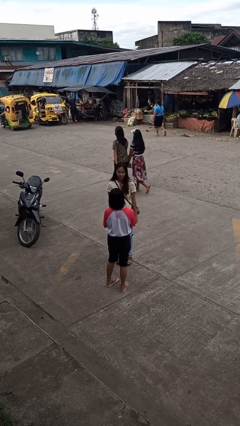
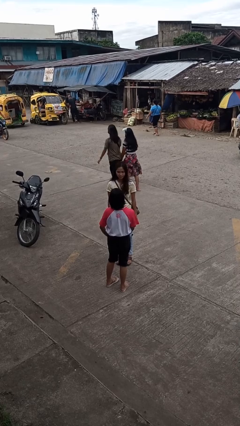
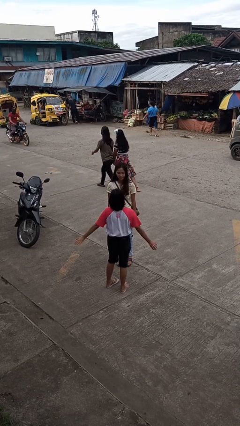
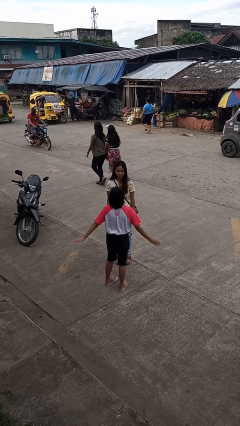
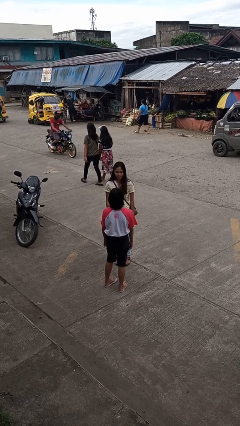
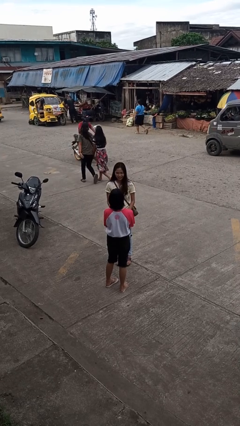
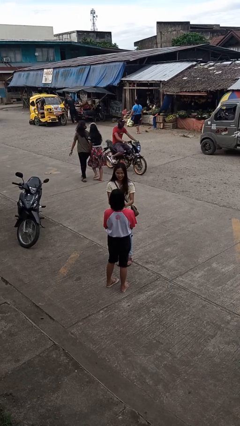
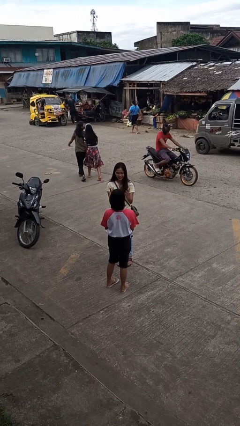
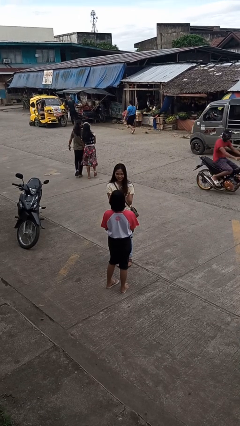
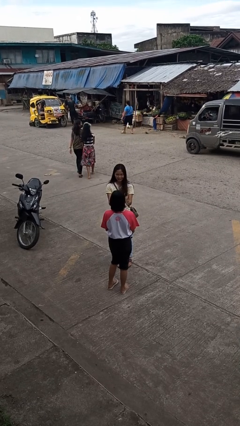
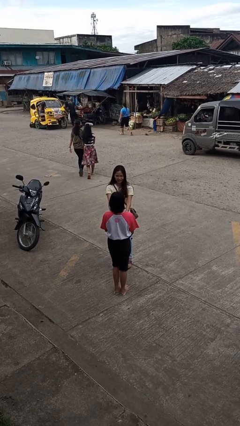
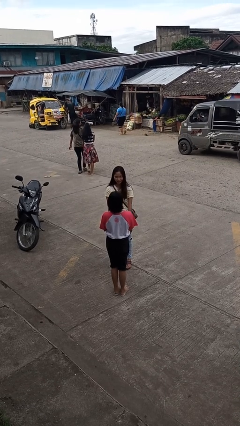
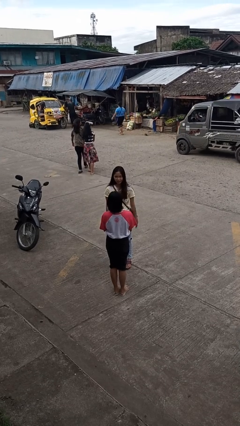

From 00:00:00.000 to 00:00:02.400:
person laughs with person

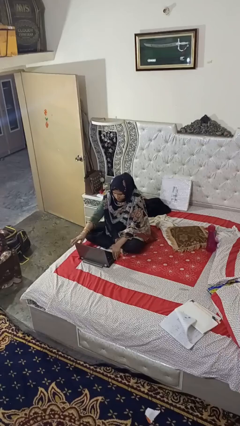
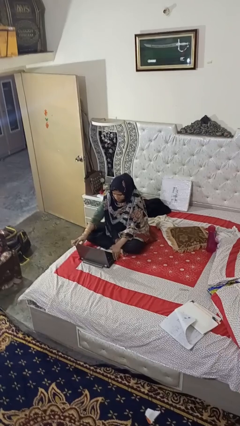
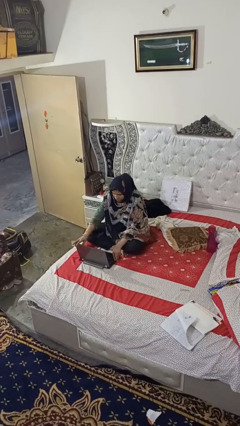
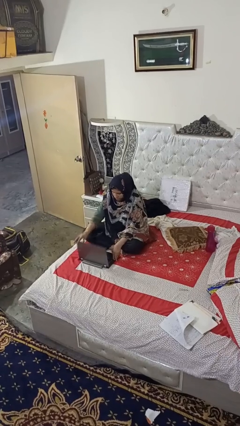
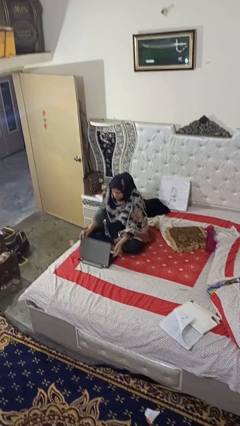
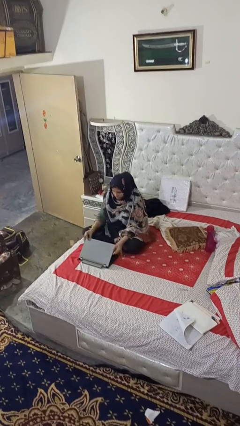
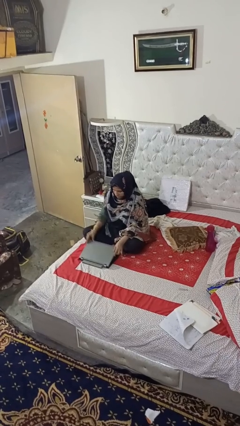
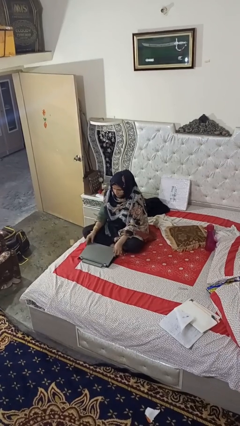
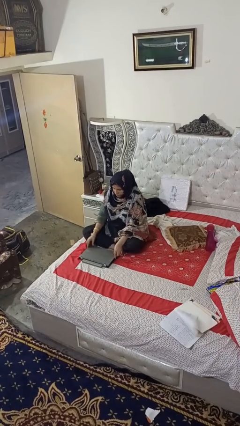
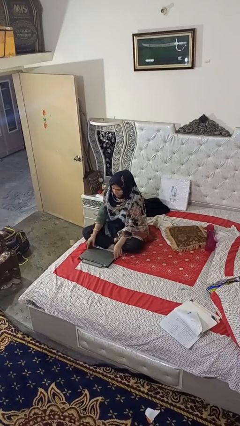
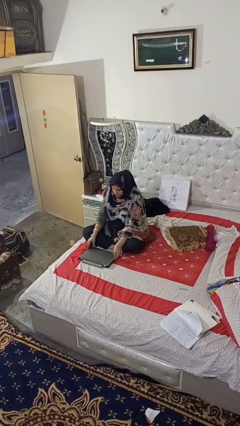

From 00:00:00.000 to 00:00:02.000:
person closes laptop

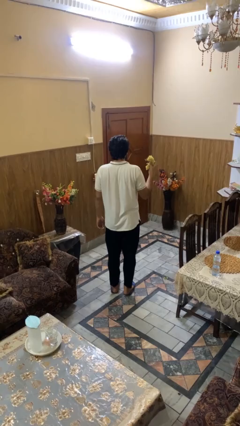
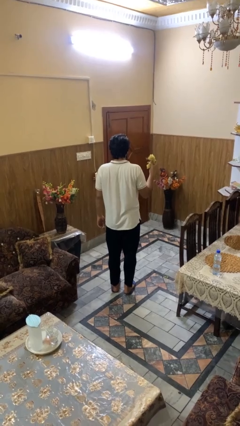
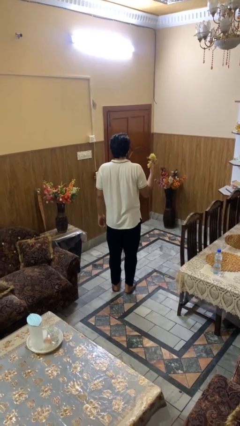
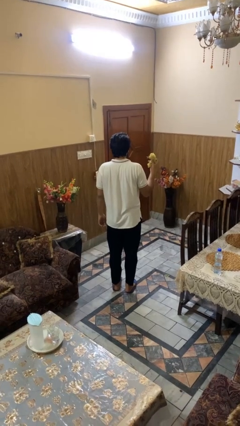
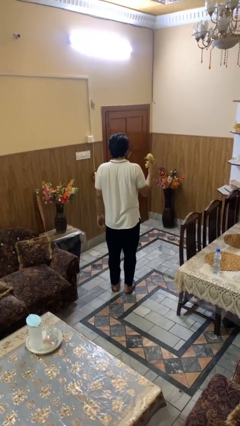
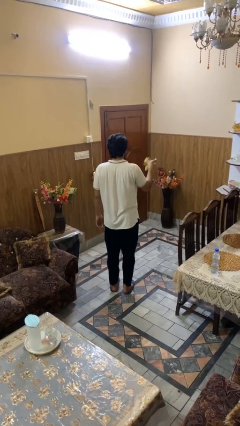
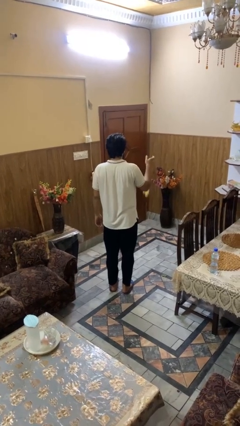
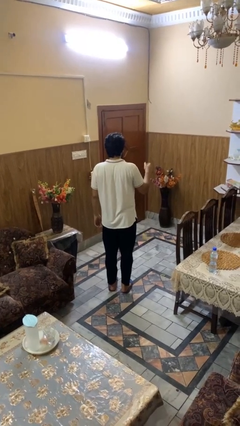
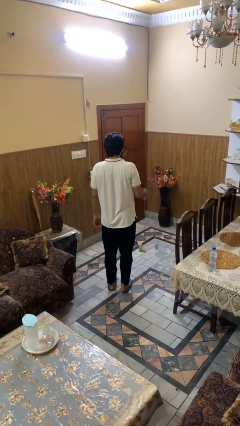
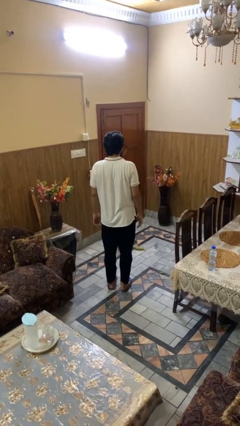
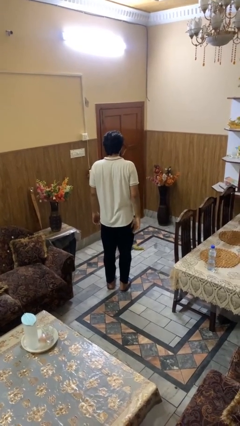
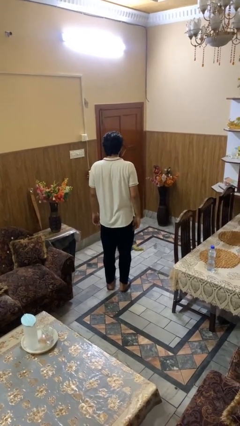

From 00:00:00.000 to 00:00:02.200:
person throws object to ground

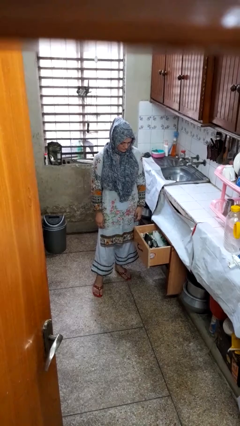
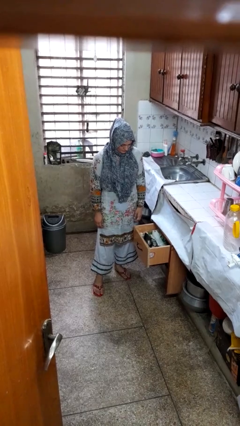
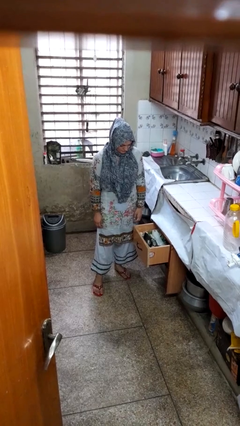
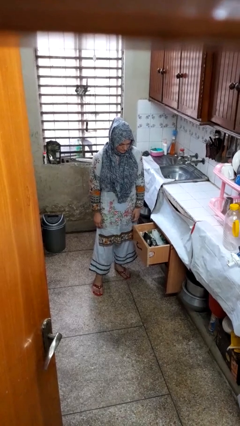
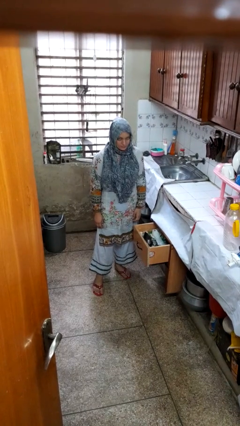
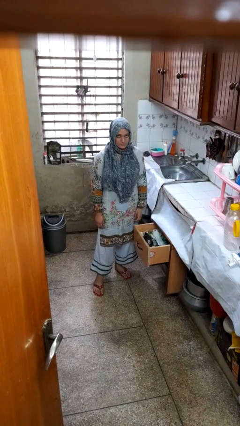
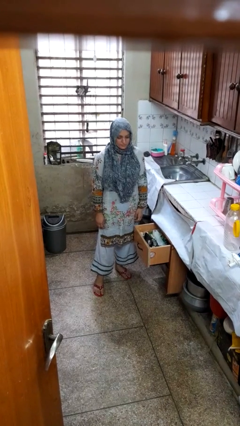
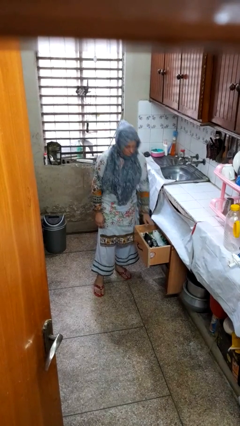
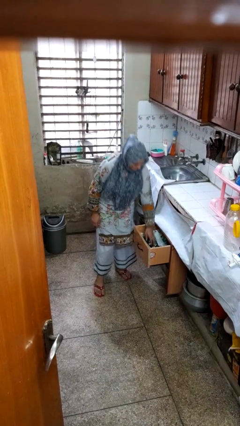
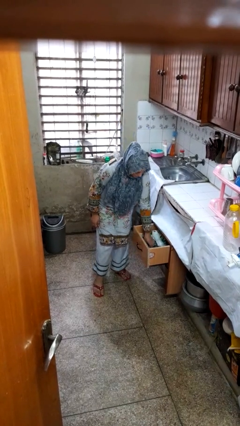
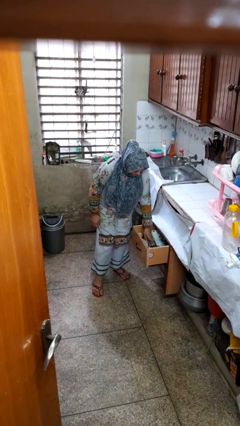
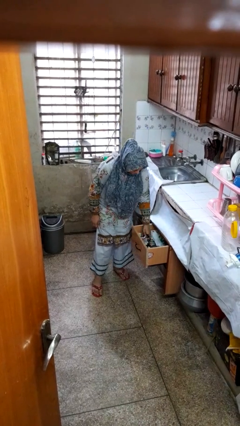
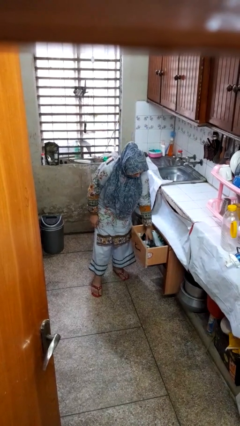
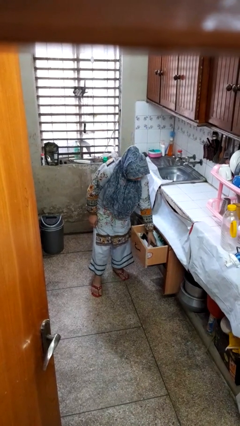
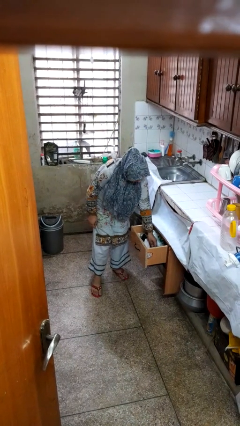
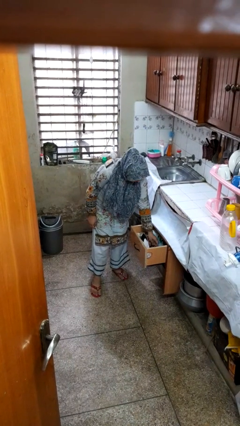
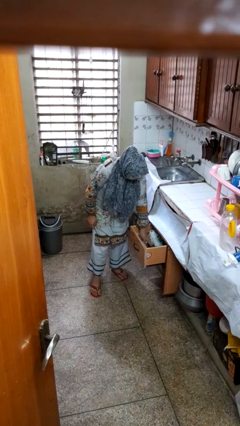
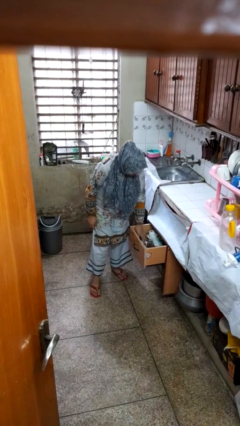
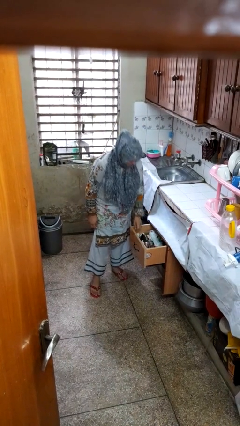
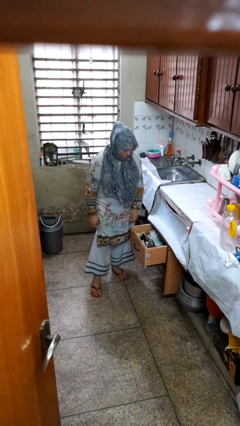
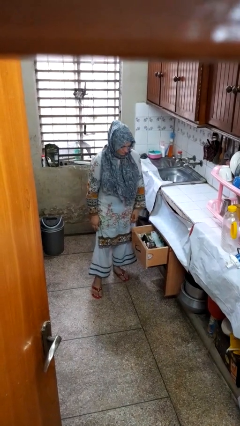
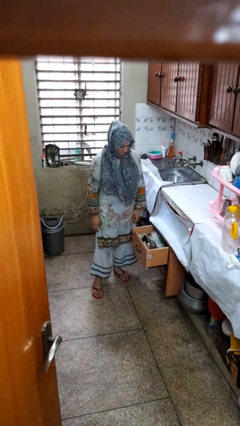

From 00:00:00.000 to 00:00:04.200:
person searches in kitchen drawer

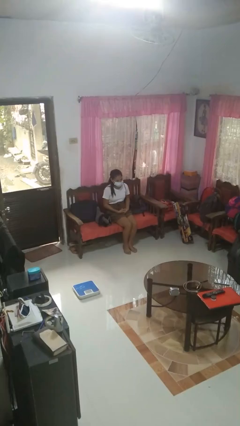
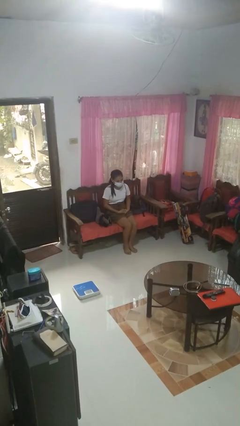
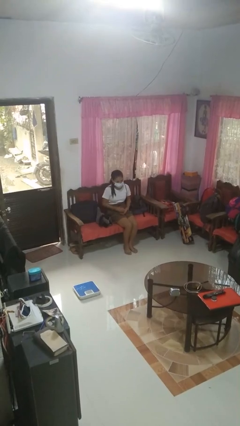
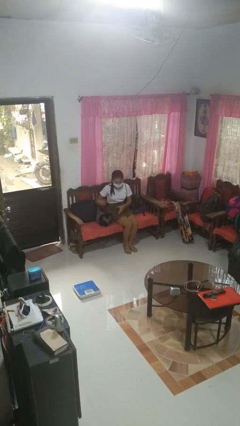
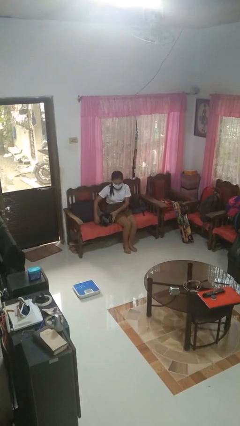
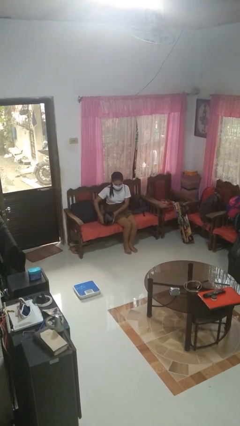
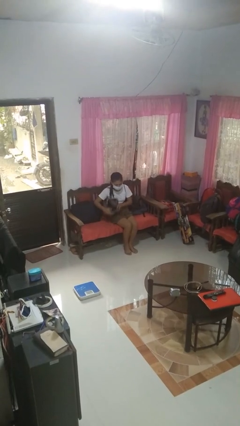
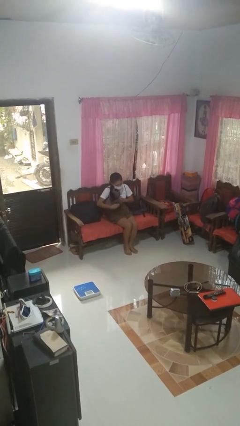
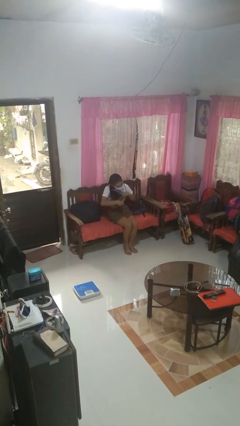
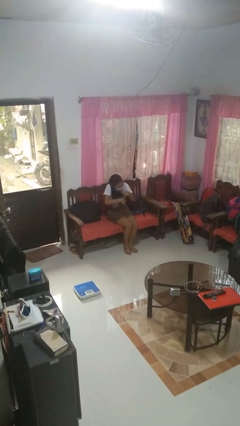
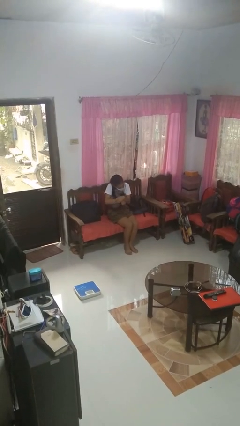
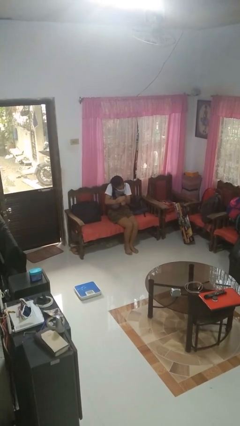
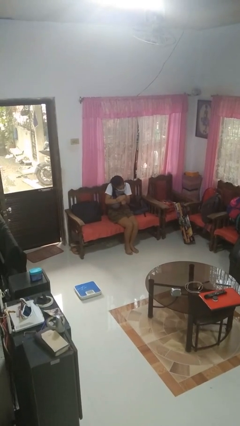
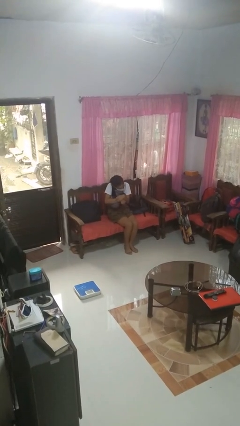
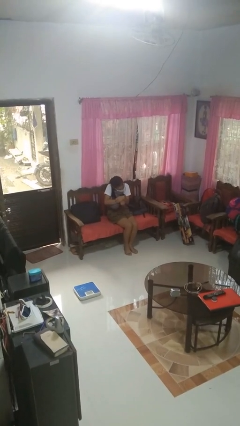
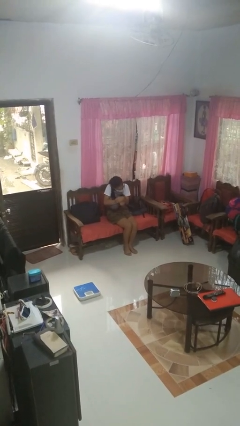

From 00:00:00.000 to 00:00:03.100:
person hugs stuffed animal

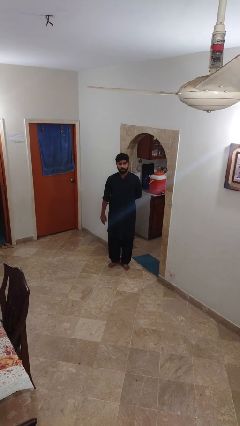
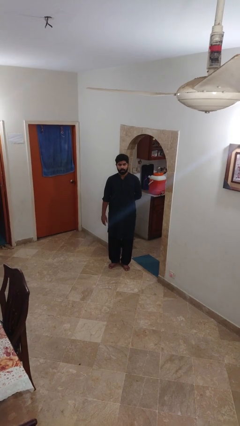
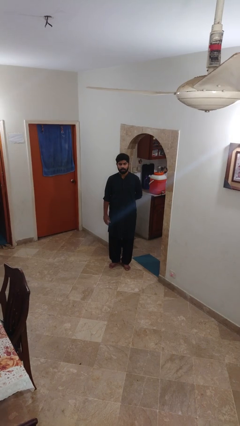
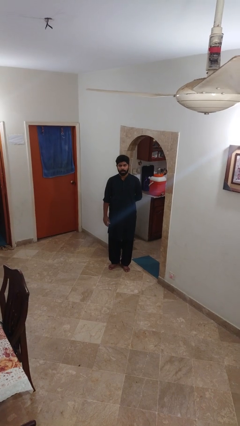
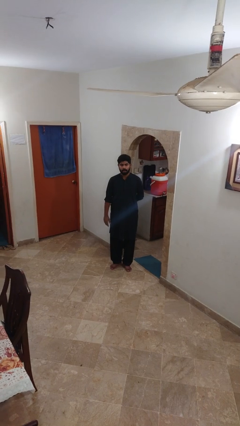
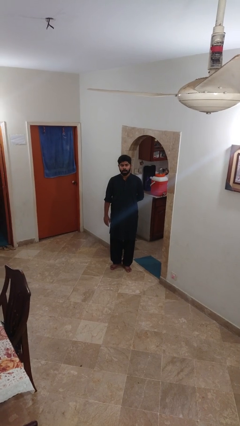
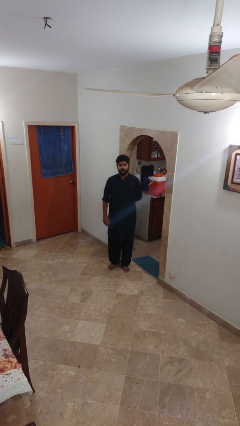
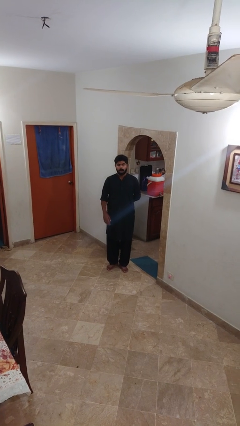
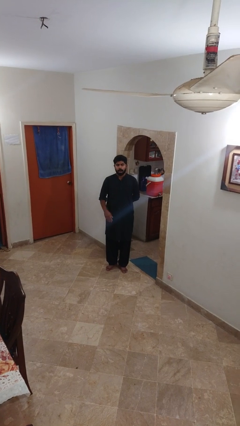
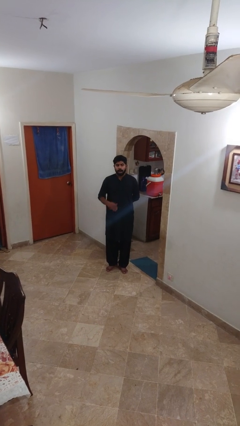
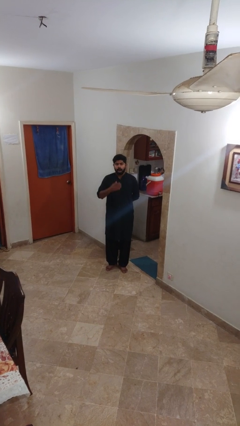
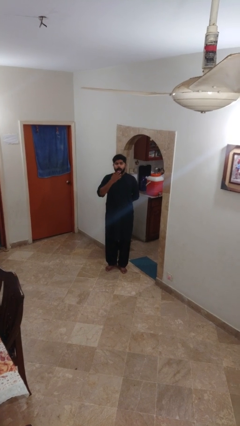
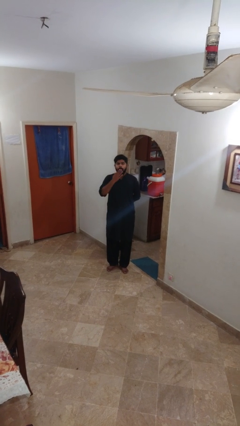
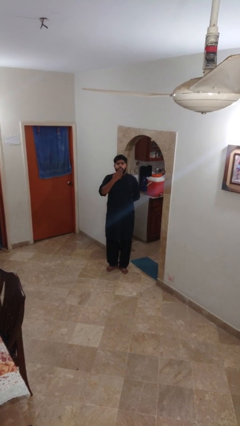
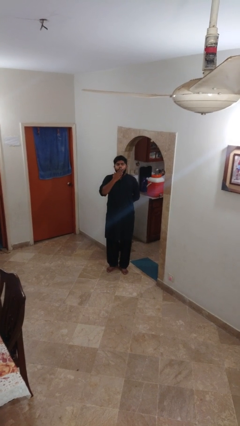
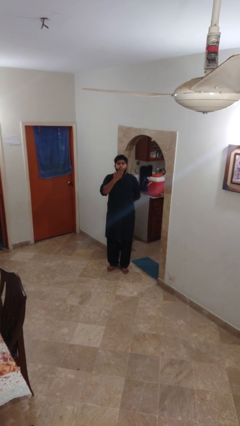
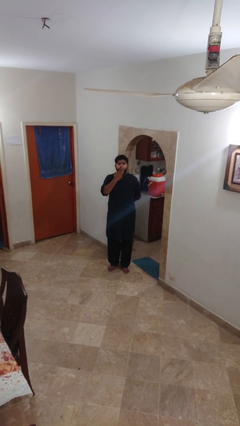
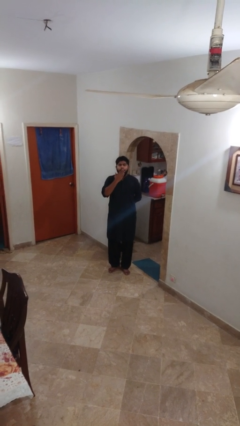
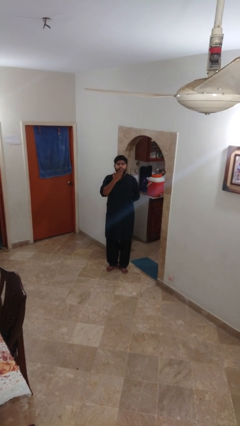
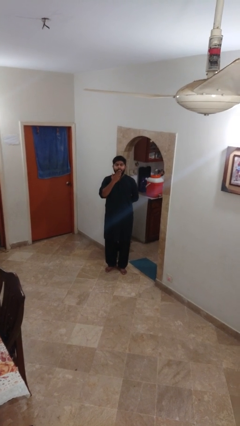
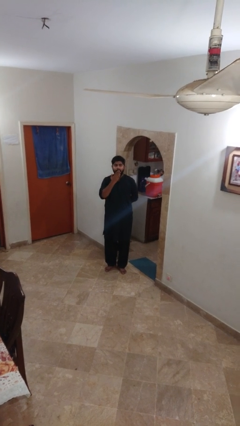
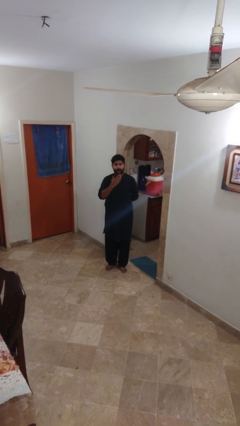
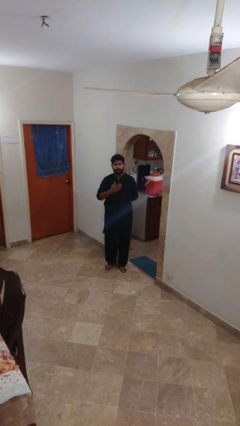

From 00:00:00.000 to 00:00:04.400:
person yawns
